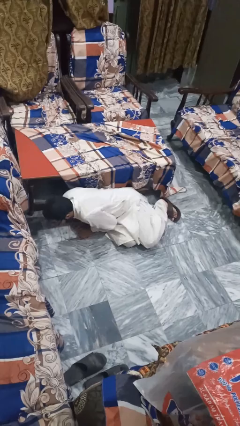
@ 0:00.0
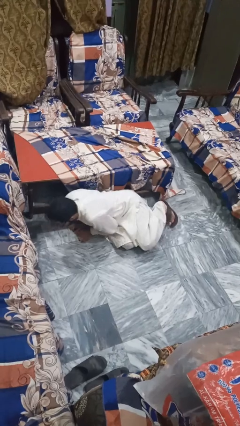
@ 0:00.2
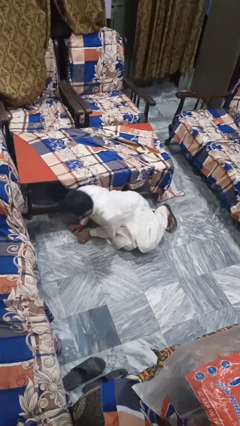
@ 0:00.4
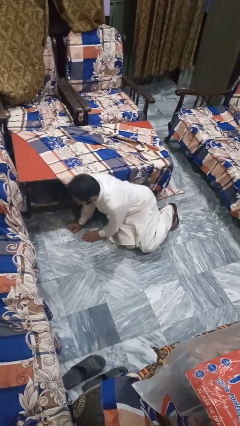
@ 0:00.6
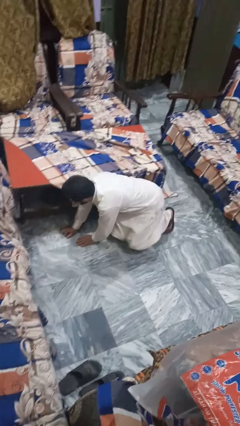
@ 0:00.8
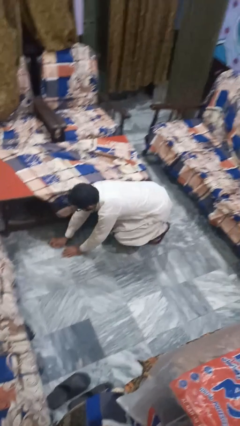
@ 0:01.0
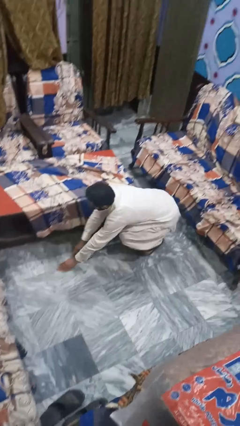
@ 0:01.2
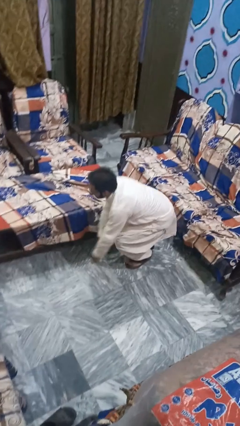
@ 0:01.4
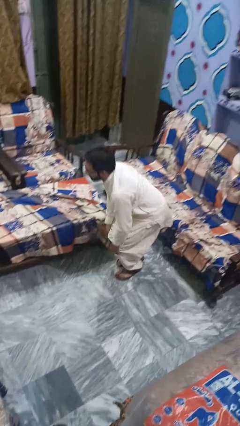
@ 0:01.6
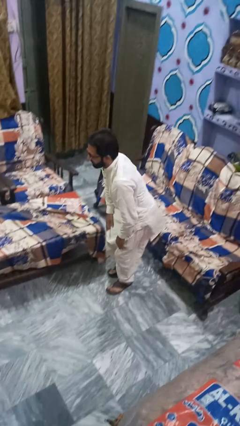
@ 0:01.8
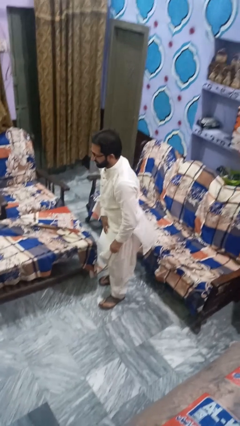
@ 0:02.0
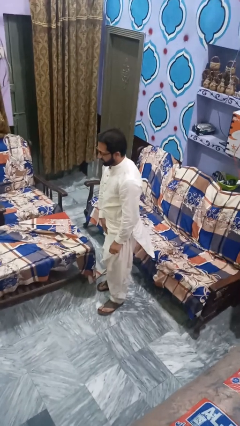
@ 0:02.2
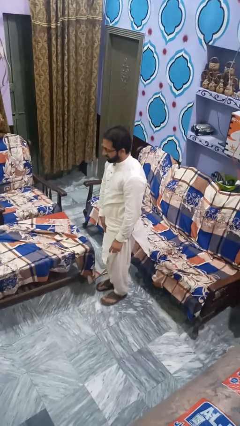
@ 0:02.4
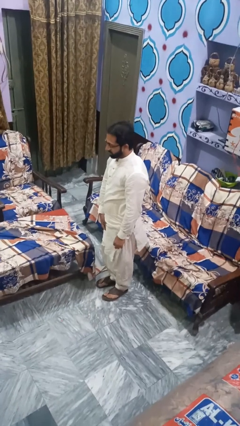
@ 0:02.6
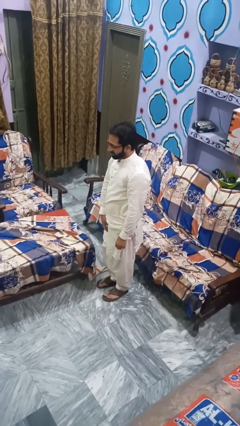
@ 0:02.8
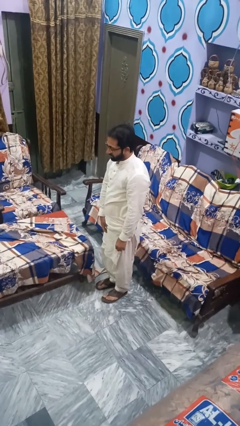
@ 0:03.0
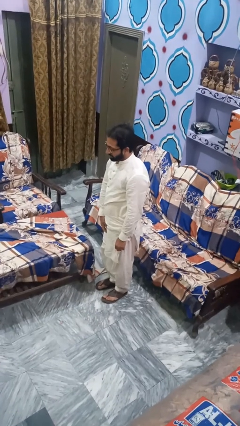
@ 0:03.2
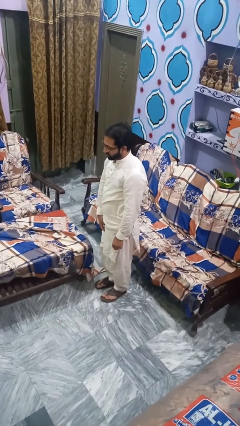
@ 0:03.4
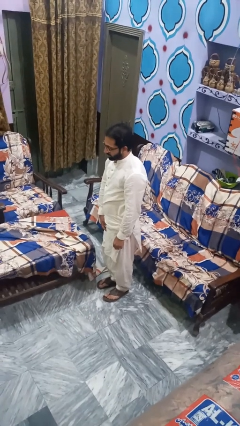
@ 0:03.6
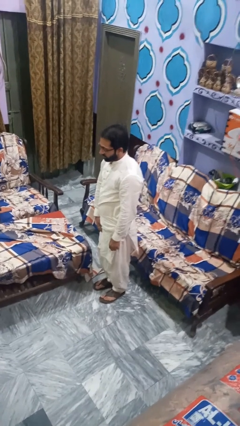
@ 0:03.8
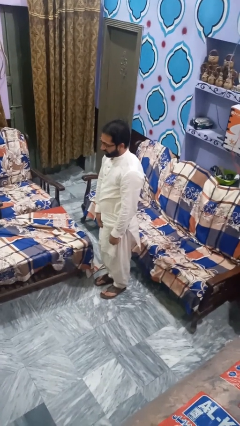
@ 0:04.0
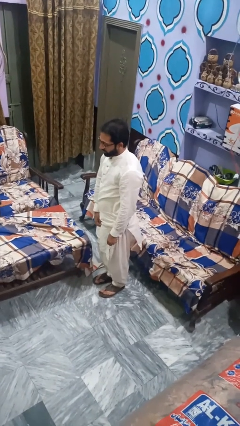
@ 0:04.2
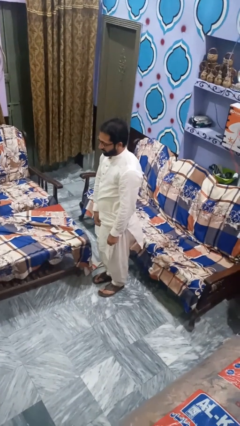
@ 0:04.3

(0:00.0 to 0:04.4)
person stands up from floor

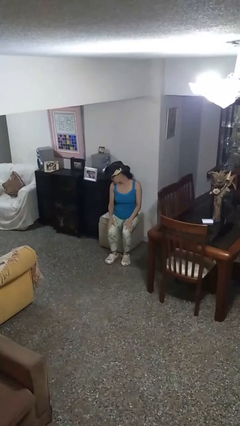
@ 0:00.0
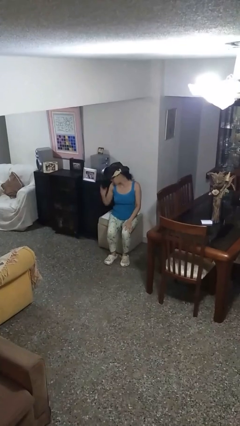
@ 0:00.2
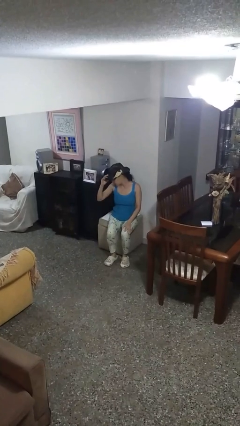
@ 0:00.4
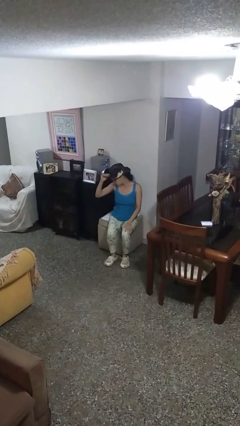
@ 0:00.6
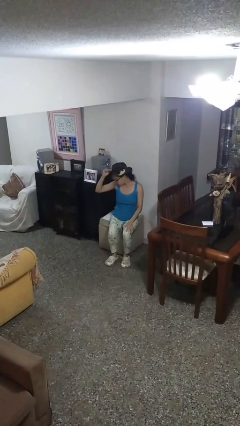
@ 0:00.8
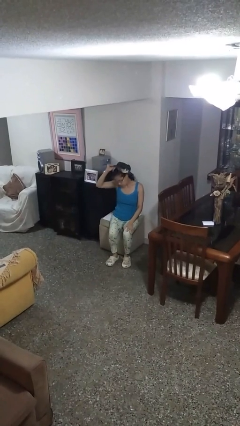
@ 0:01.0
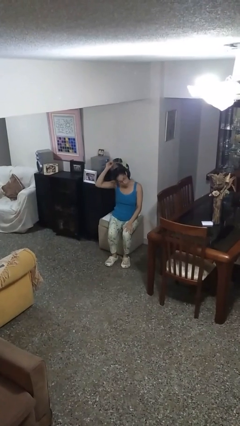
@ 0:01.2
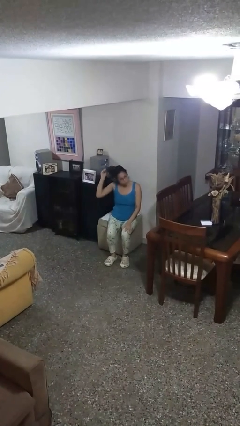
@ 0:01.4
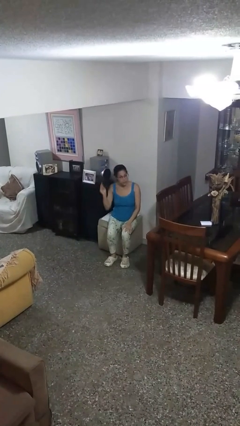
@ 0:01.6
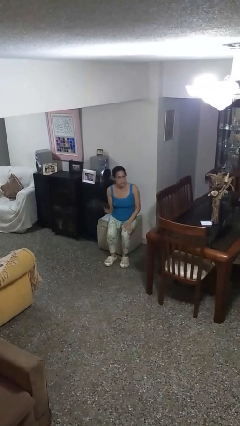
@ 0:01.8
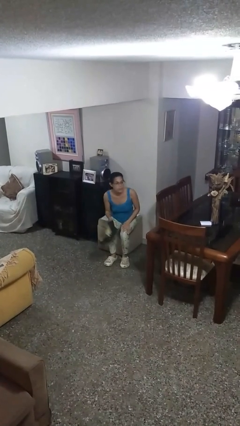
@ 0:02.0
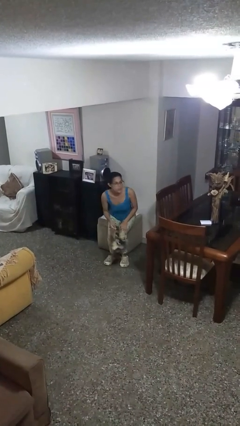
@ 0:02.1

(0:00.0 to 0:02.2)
person takes off hat

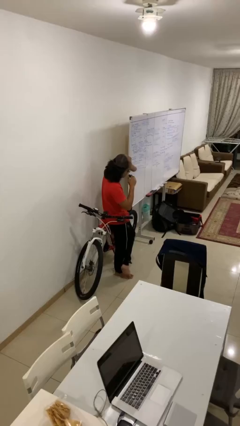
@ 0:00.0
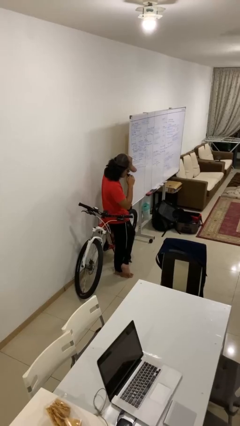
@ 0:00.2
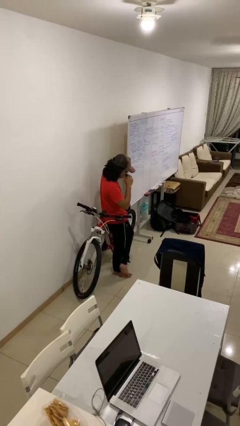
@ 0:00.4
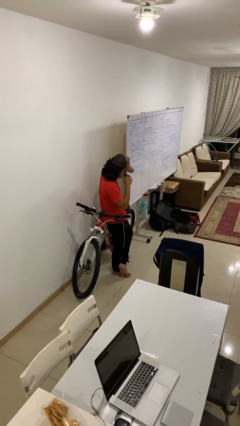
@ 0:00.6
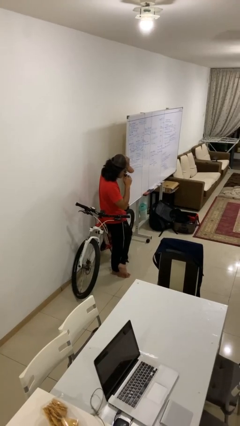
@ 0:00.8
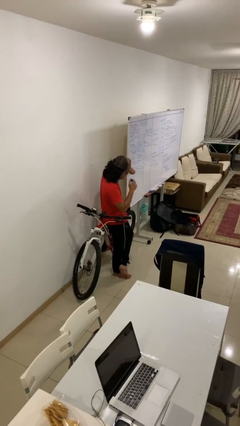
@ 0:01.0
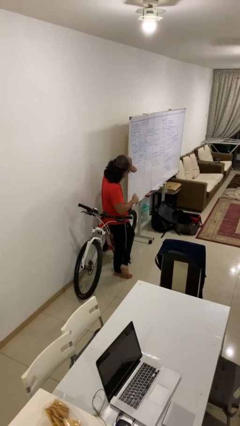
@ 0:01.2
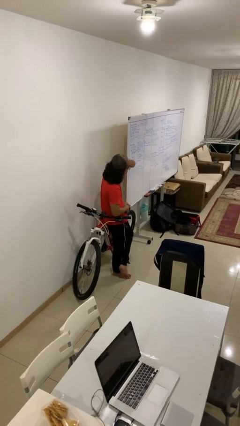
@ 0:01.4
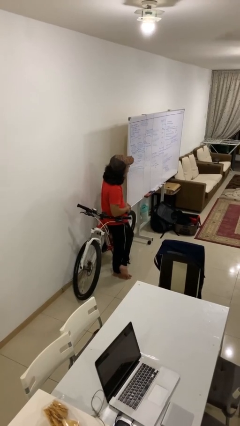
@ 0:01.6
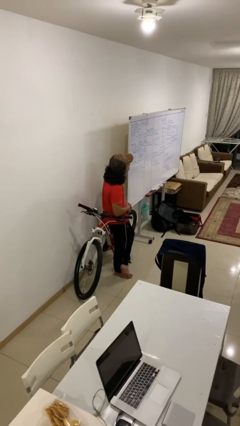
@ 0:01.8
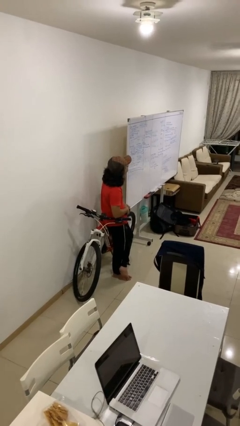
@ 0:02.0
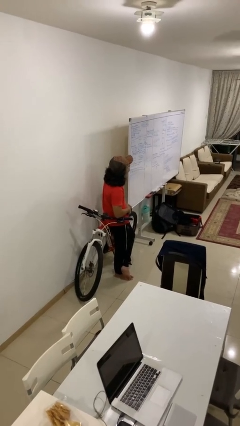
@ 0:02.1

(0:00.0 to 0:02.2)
person vapes

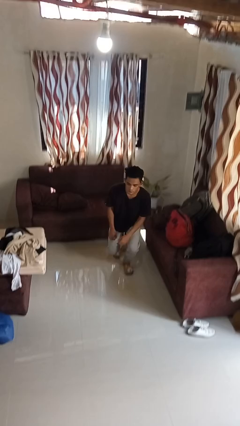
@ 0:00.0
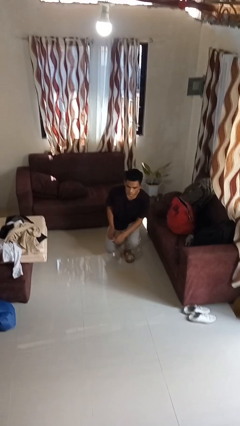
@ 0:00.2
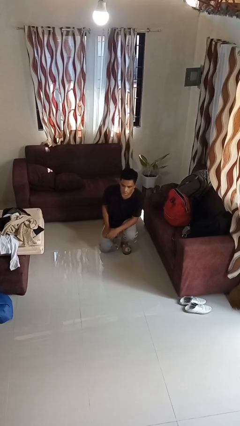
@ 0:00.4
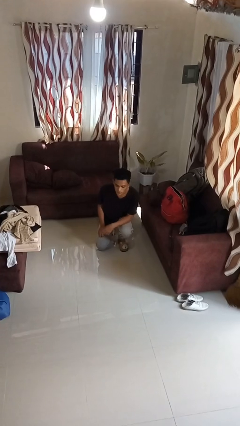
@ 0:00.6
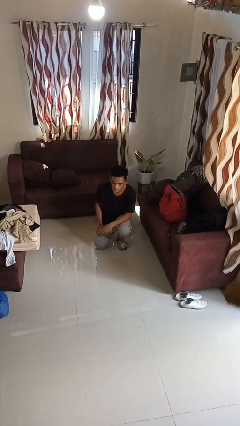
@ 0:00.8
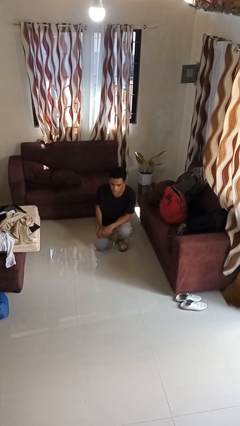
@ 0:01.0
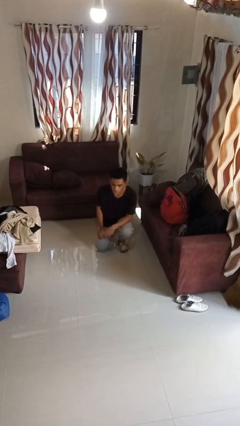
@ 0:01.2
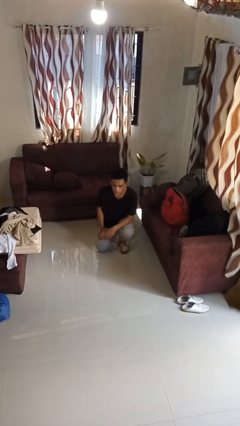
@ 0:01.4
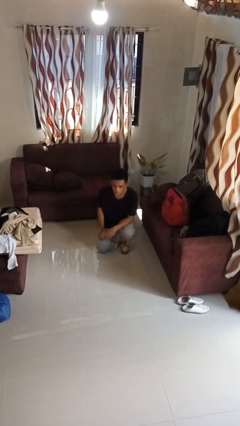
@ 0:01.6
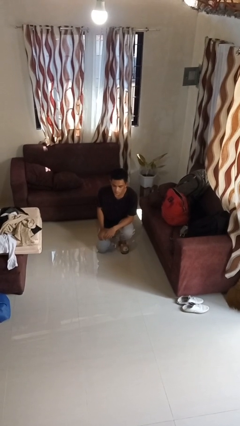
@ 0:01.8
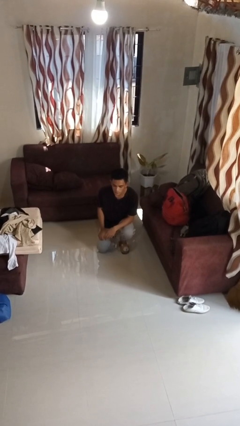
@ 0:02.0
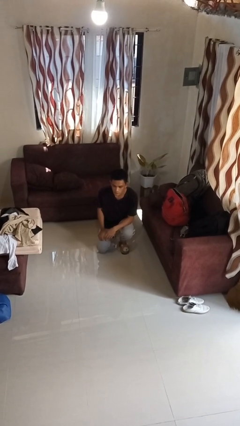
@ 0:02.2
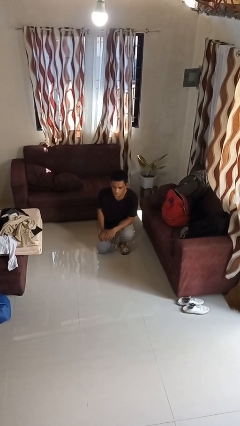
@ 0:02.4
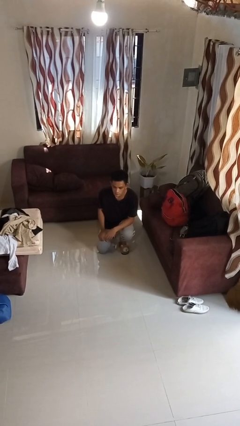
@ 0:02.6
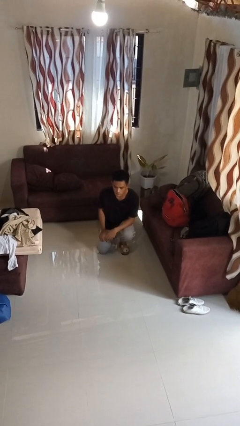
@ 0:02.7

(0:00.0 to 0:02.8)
person kneels

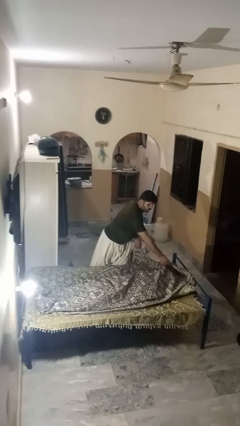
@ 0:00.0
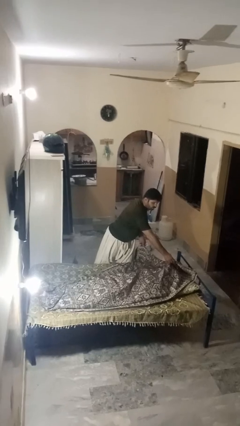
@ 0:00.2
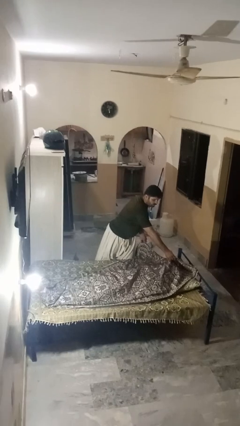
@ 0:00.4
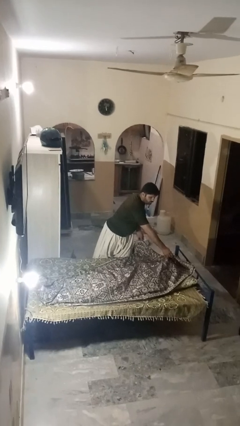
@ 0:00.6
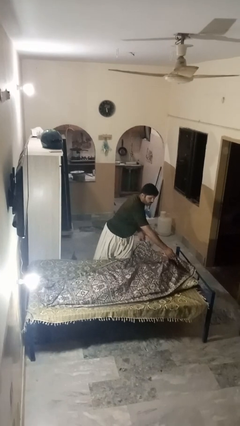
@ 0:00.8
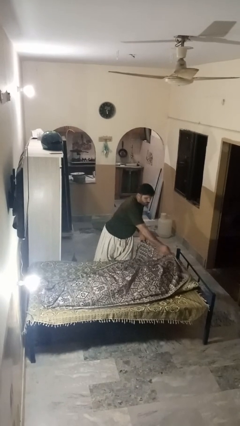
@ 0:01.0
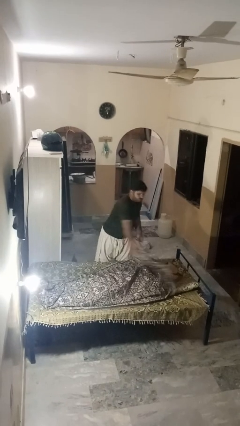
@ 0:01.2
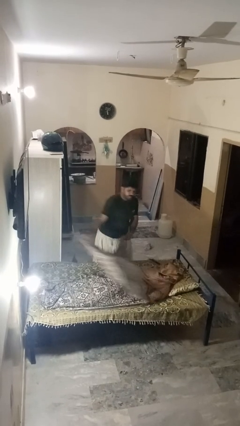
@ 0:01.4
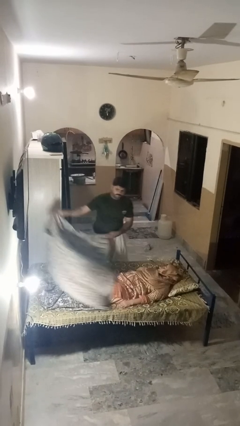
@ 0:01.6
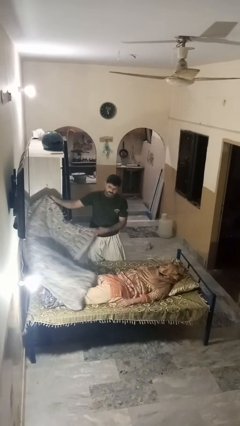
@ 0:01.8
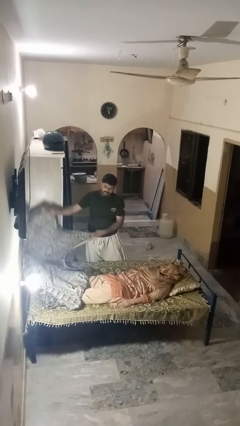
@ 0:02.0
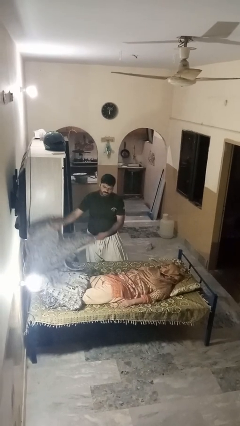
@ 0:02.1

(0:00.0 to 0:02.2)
person uncovers friend with blanket

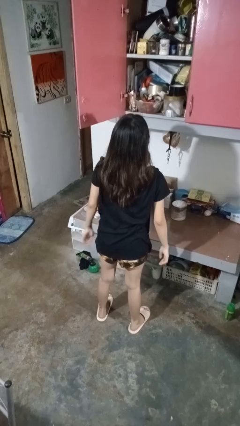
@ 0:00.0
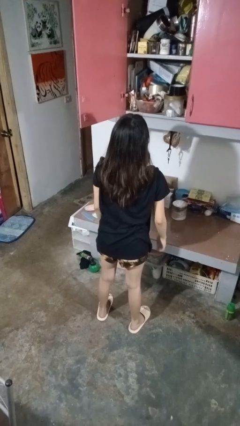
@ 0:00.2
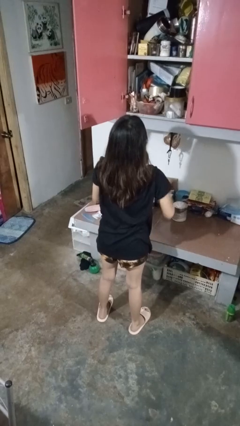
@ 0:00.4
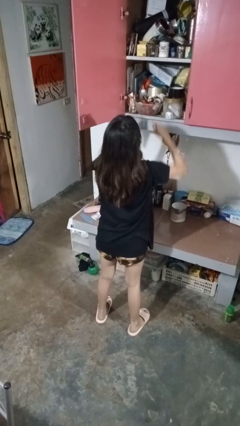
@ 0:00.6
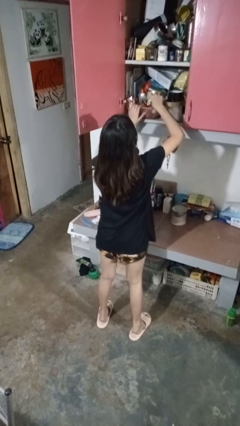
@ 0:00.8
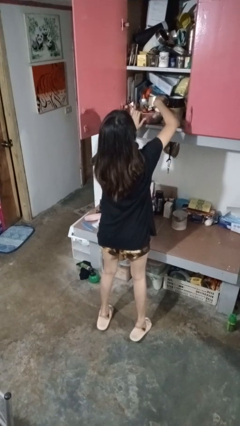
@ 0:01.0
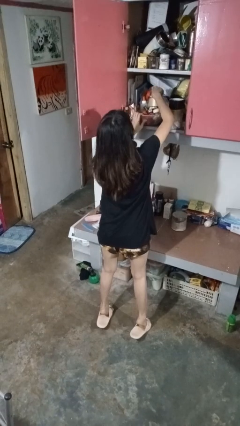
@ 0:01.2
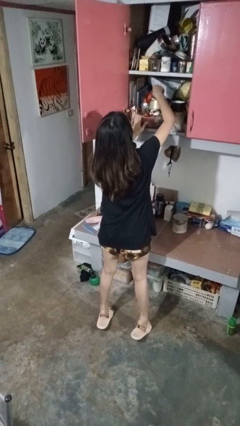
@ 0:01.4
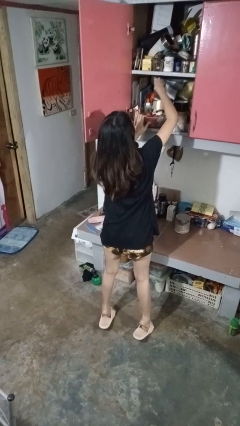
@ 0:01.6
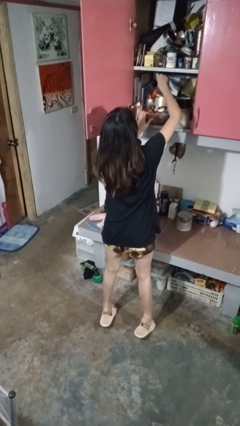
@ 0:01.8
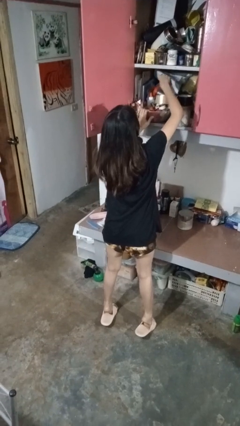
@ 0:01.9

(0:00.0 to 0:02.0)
person searches in cabinet

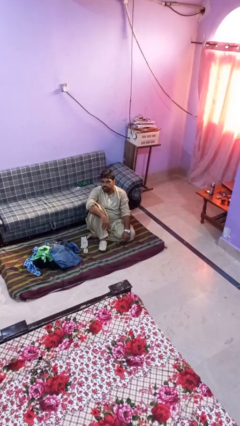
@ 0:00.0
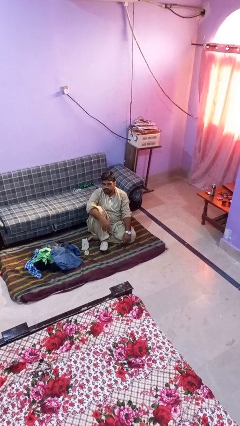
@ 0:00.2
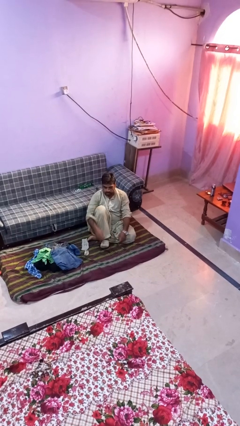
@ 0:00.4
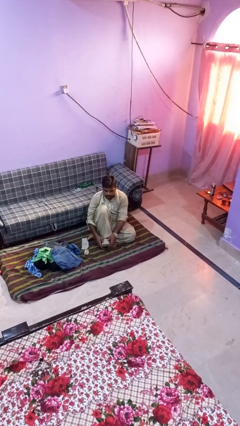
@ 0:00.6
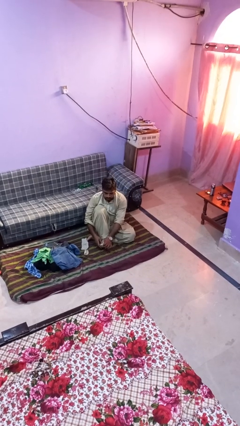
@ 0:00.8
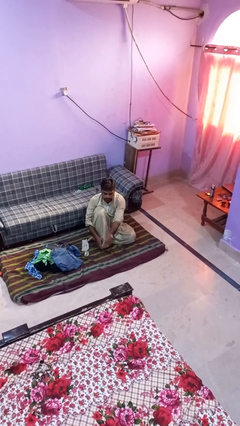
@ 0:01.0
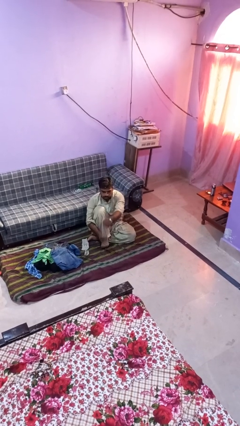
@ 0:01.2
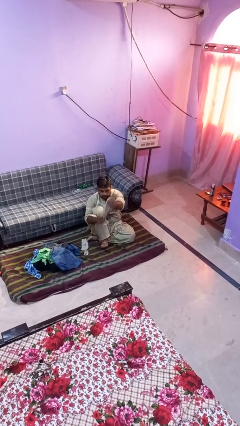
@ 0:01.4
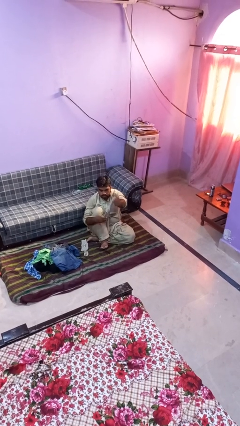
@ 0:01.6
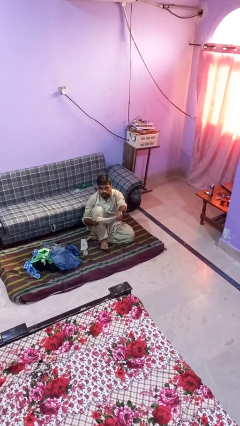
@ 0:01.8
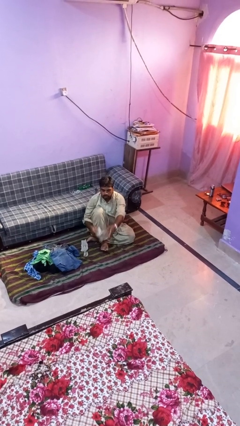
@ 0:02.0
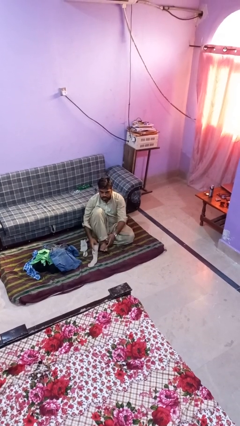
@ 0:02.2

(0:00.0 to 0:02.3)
person takes off socks
